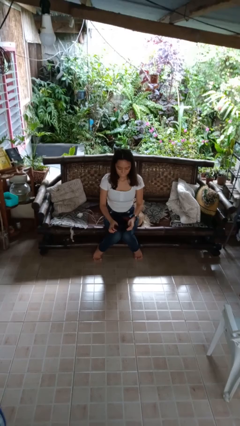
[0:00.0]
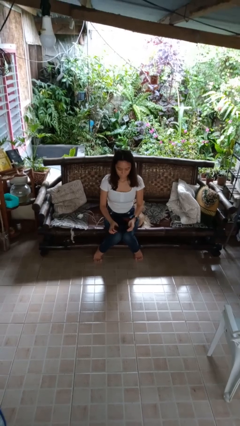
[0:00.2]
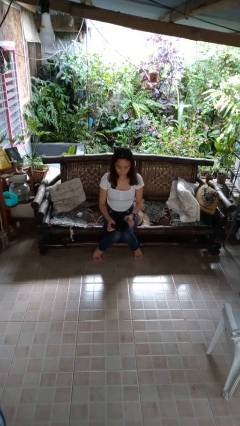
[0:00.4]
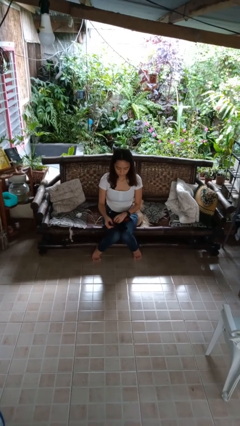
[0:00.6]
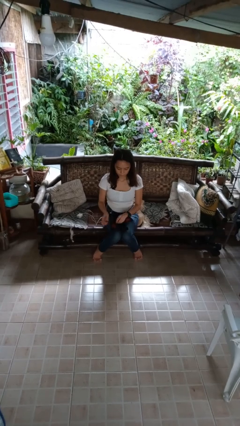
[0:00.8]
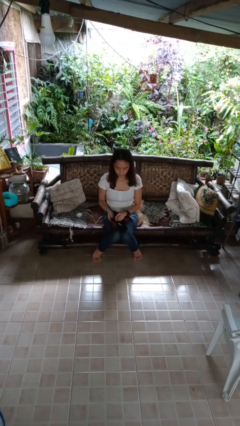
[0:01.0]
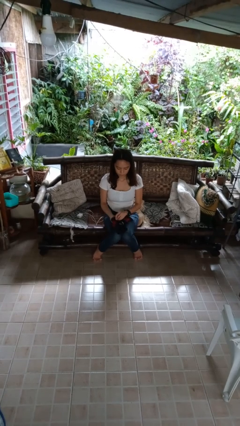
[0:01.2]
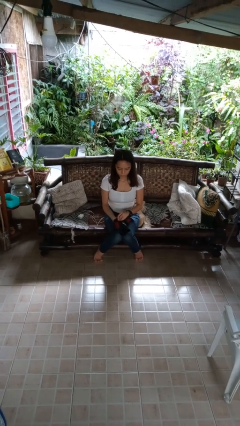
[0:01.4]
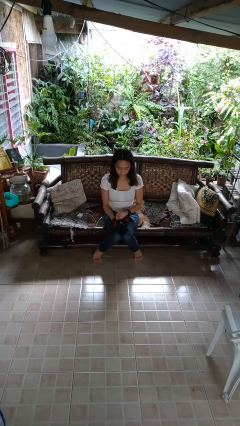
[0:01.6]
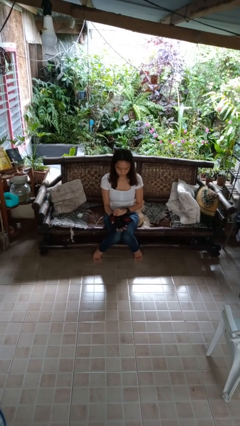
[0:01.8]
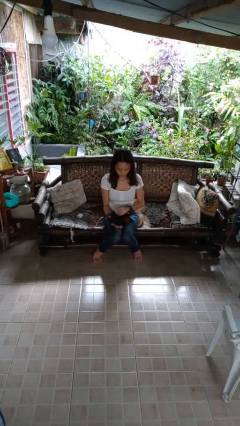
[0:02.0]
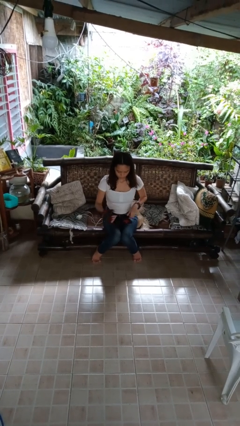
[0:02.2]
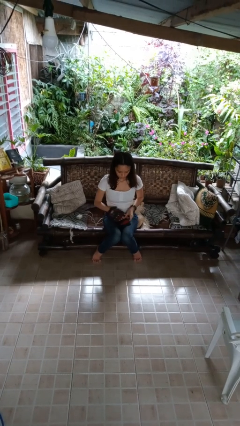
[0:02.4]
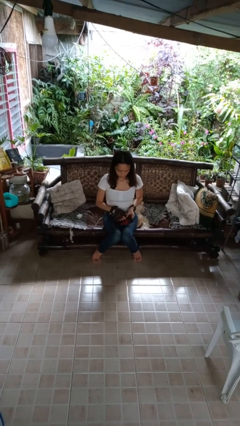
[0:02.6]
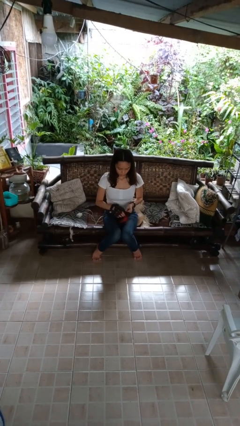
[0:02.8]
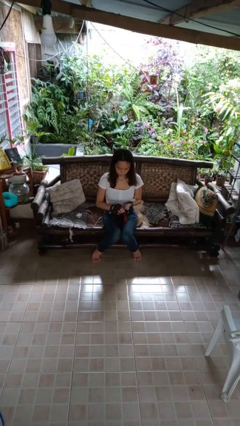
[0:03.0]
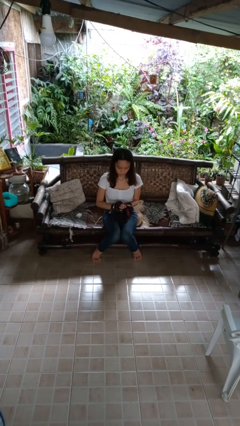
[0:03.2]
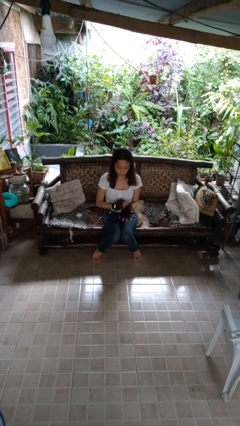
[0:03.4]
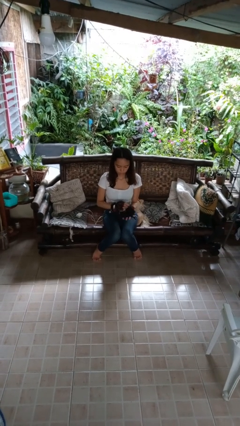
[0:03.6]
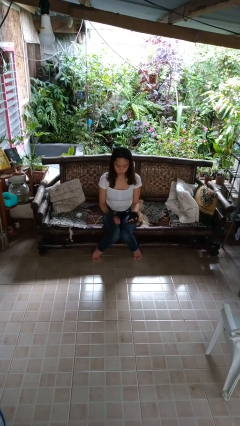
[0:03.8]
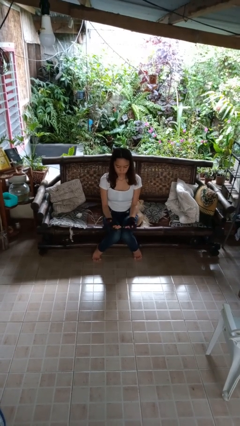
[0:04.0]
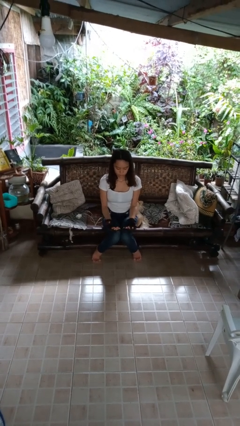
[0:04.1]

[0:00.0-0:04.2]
person puts on gloves

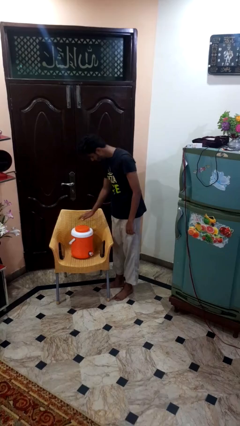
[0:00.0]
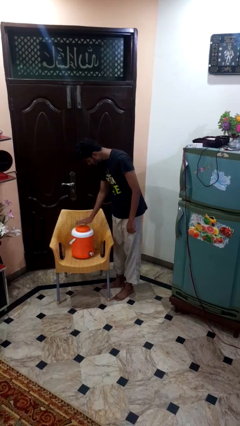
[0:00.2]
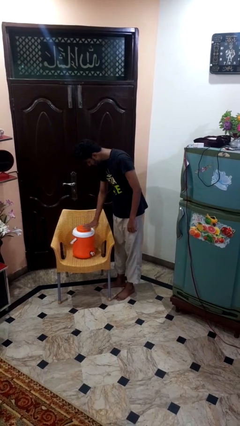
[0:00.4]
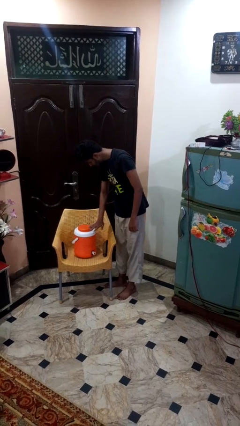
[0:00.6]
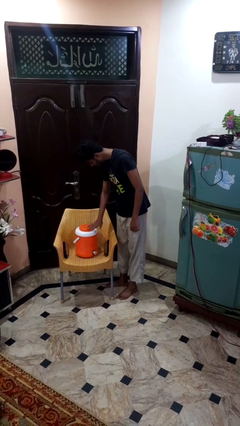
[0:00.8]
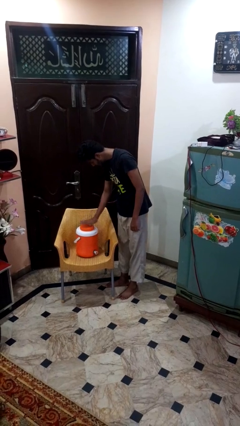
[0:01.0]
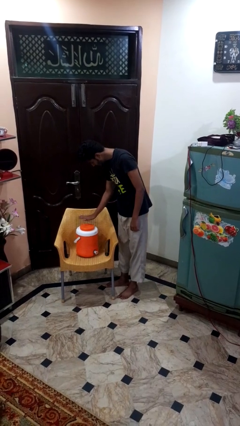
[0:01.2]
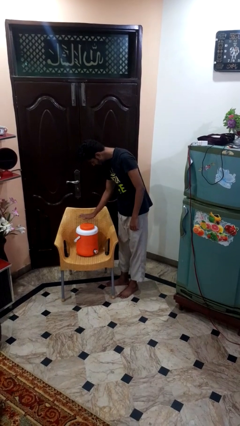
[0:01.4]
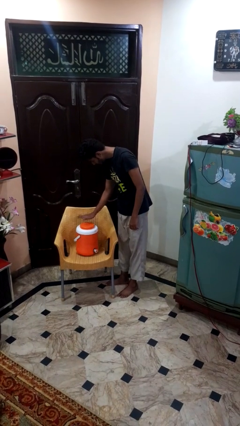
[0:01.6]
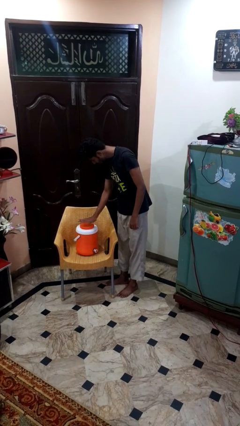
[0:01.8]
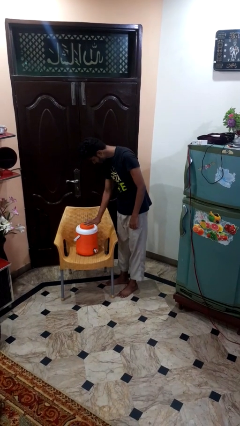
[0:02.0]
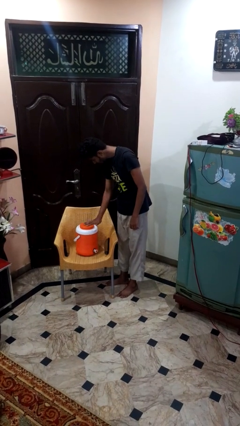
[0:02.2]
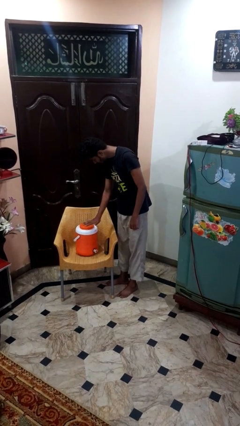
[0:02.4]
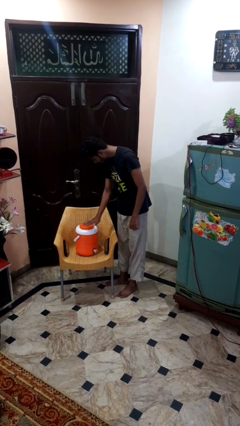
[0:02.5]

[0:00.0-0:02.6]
person waves hand over object

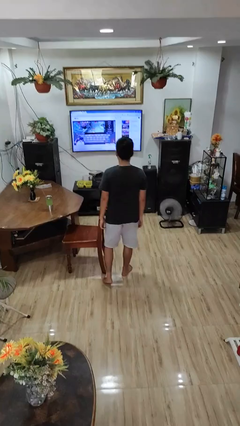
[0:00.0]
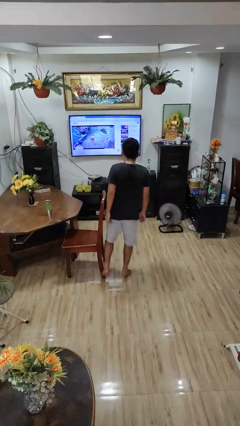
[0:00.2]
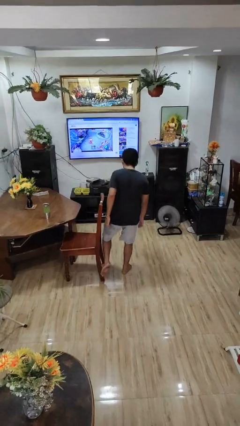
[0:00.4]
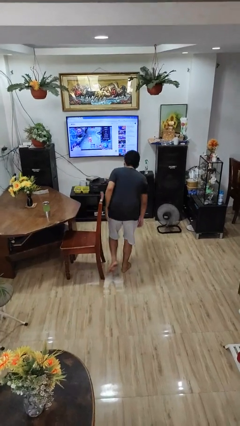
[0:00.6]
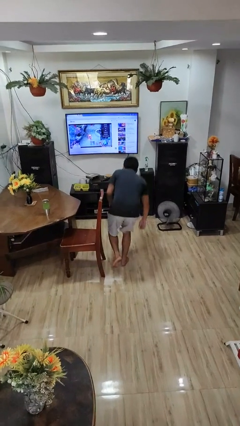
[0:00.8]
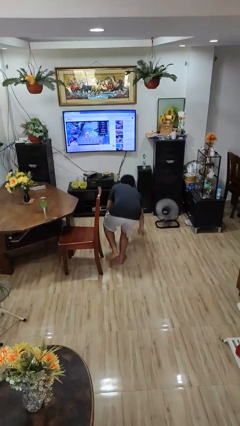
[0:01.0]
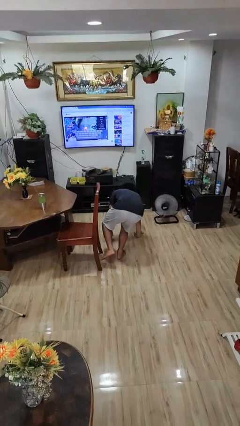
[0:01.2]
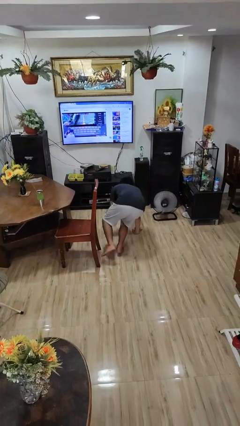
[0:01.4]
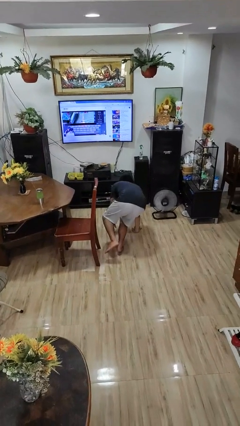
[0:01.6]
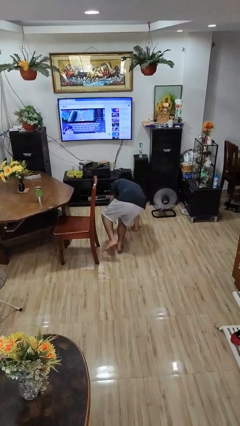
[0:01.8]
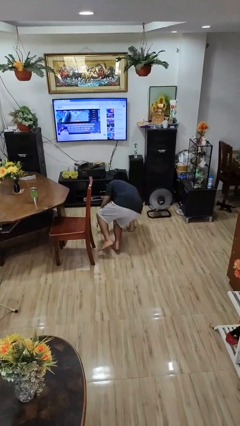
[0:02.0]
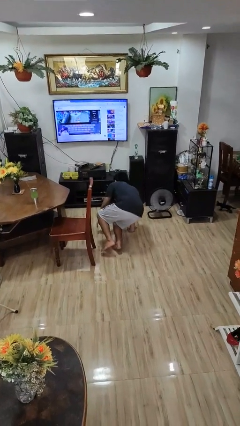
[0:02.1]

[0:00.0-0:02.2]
person trips on object on floor

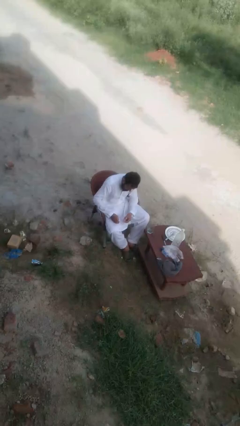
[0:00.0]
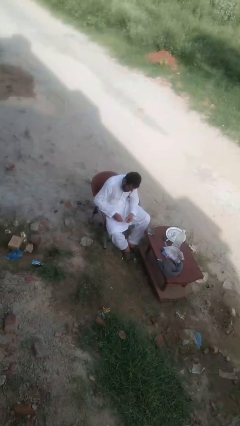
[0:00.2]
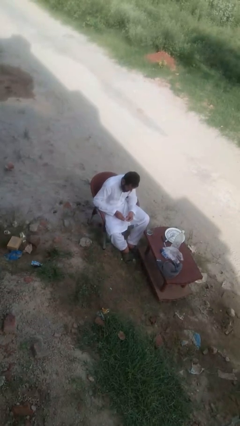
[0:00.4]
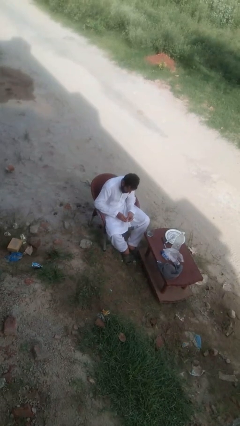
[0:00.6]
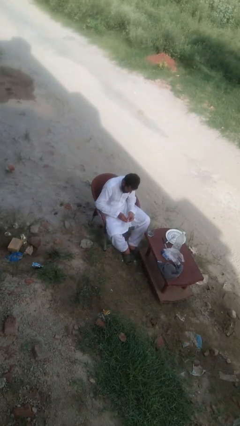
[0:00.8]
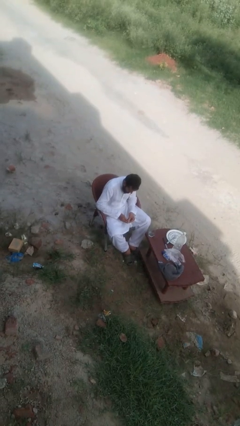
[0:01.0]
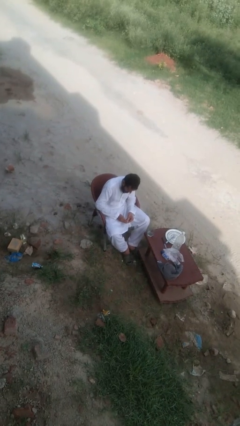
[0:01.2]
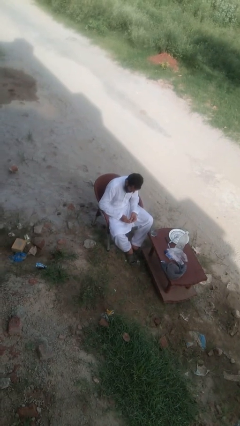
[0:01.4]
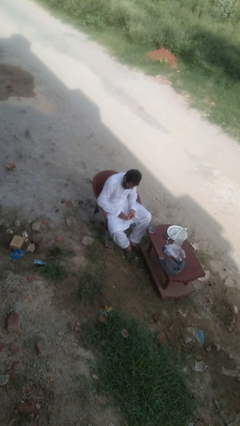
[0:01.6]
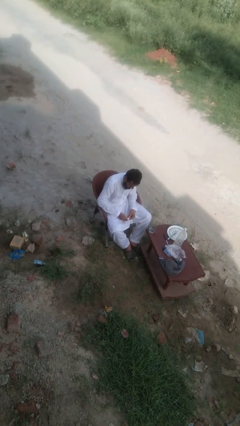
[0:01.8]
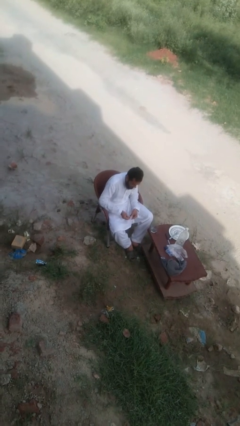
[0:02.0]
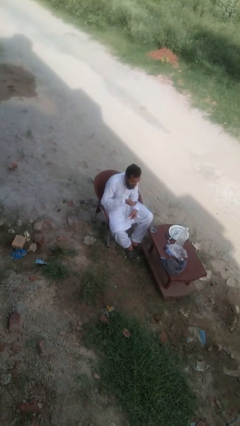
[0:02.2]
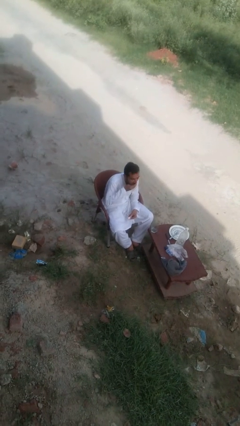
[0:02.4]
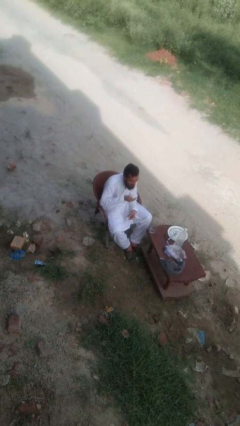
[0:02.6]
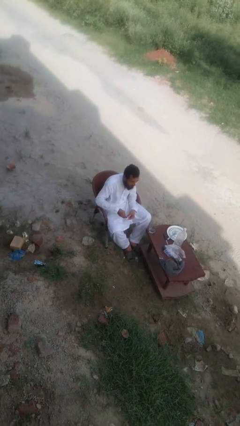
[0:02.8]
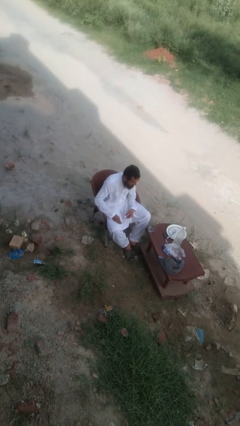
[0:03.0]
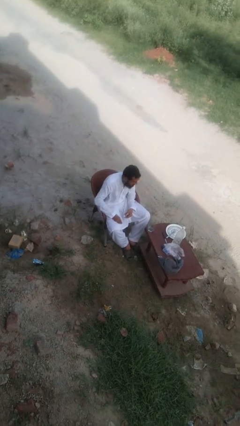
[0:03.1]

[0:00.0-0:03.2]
person takes medicine pills

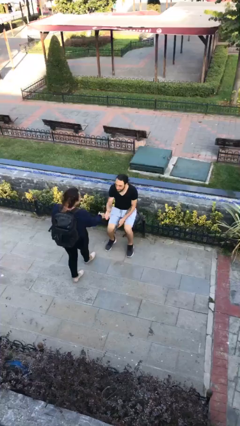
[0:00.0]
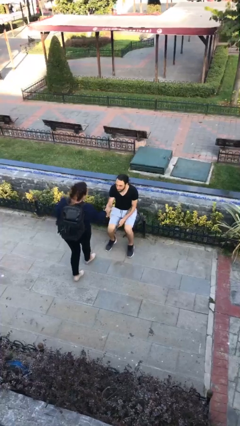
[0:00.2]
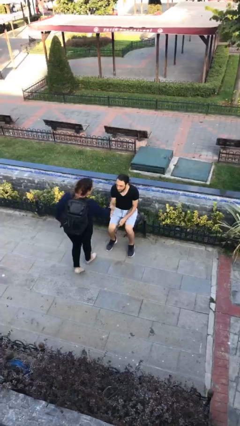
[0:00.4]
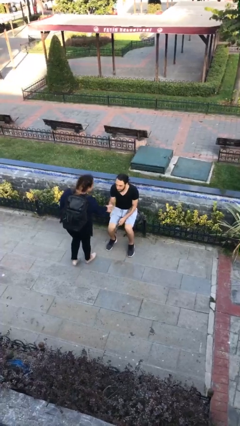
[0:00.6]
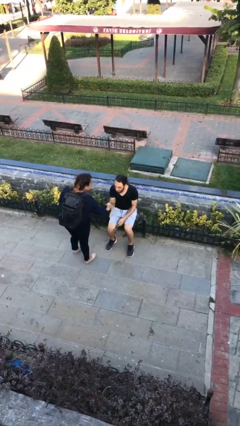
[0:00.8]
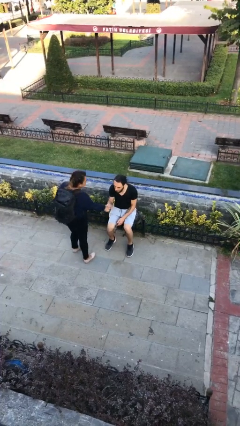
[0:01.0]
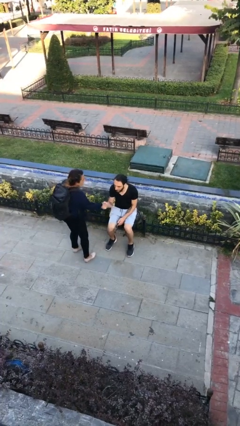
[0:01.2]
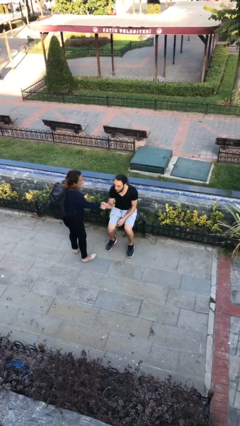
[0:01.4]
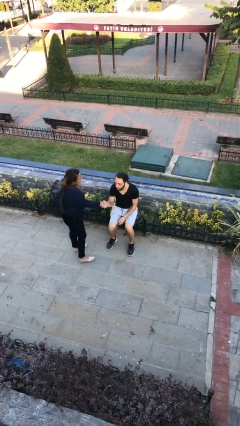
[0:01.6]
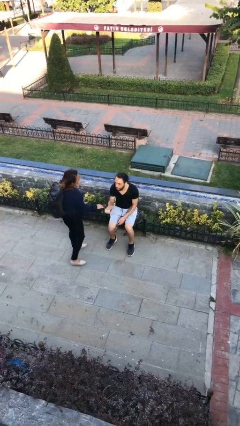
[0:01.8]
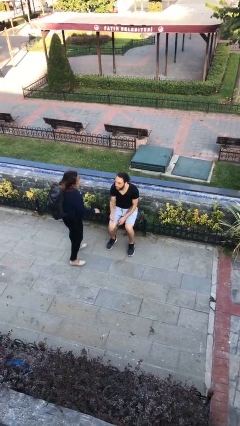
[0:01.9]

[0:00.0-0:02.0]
person shakes hand

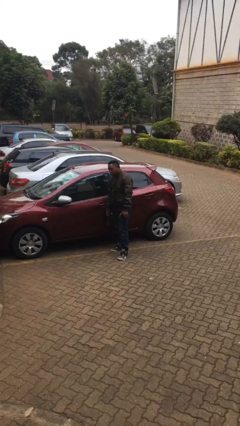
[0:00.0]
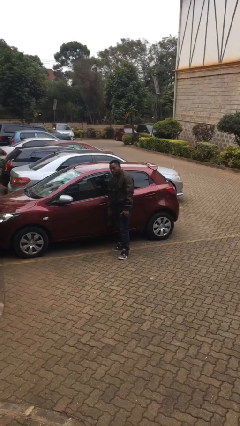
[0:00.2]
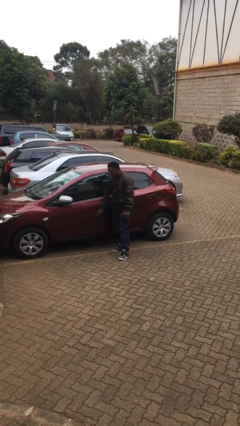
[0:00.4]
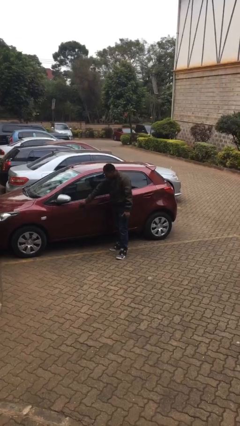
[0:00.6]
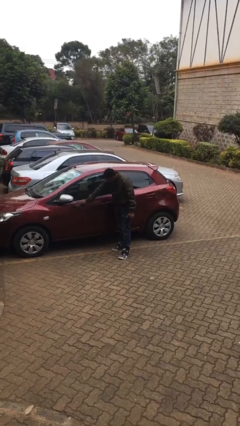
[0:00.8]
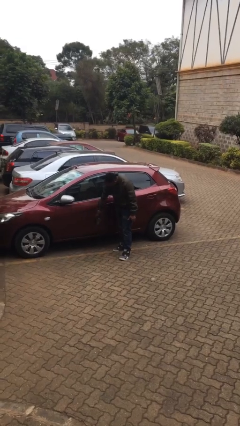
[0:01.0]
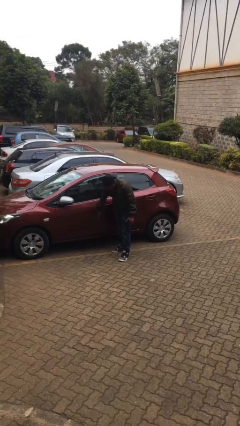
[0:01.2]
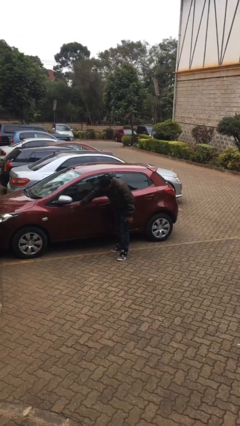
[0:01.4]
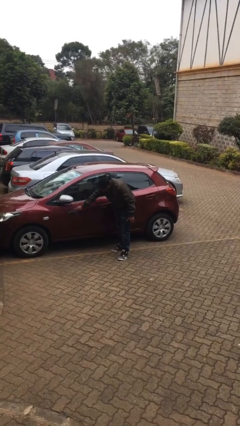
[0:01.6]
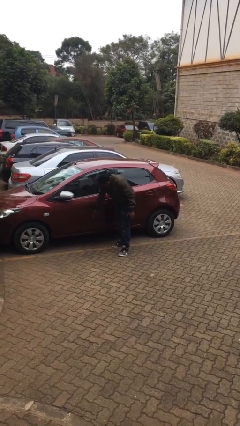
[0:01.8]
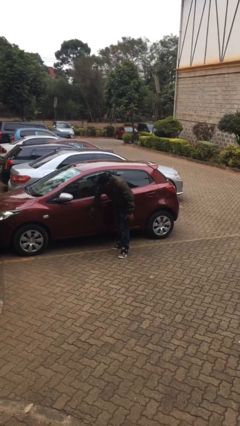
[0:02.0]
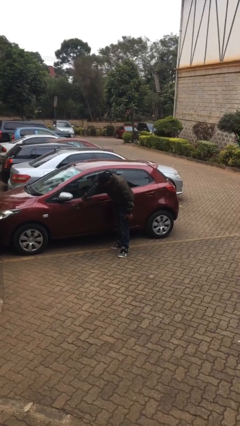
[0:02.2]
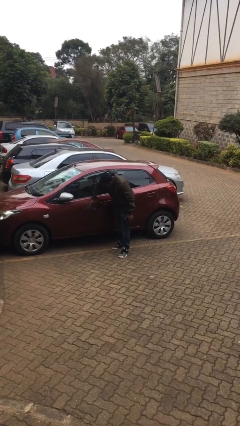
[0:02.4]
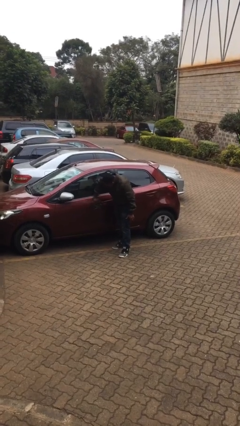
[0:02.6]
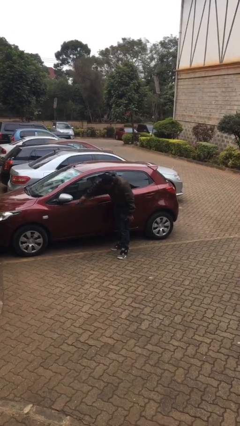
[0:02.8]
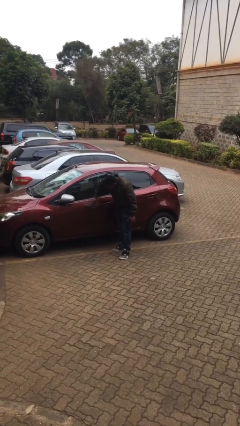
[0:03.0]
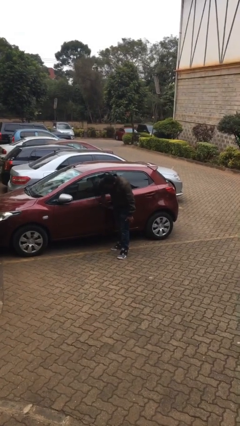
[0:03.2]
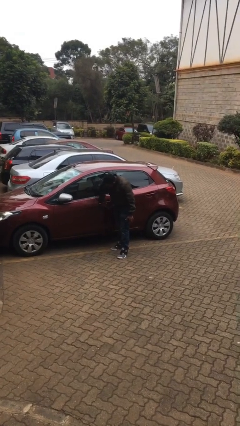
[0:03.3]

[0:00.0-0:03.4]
person polishes car with rag

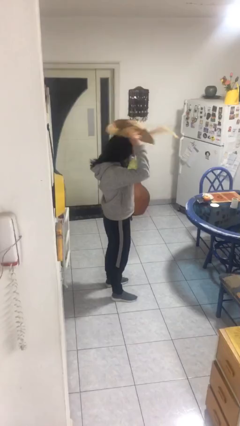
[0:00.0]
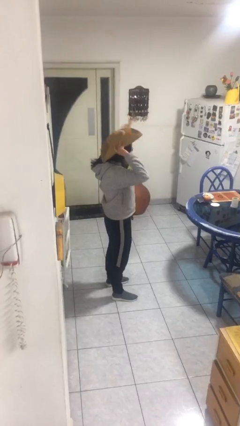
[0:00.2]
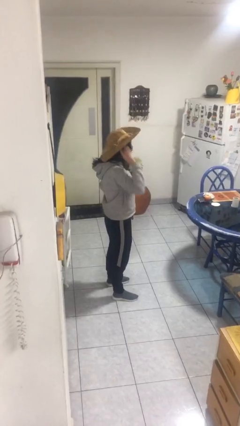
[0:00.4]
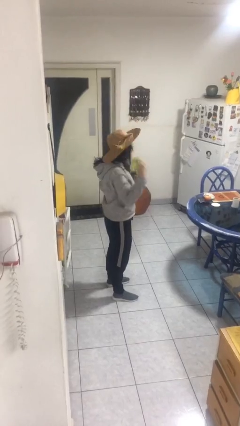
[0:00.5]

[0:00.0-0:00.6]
person puts on hat
